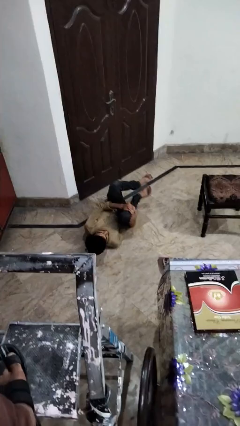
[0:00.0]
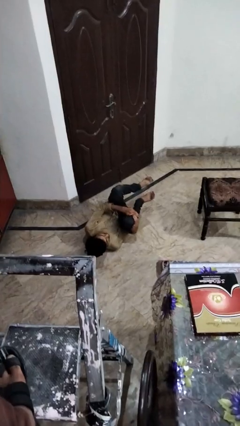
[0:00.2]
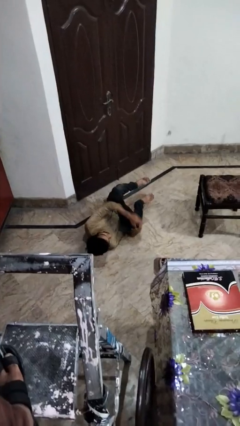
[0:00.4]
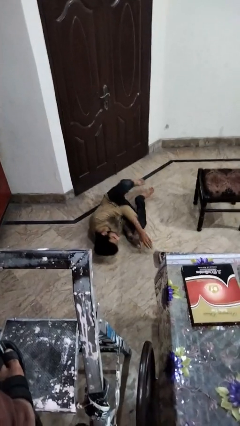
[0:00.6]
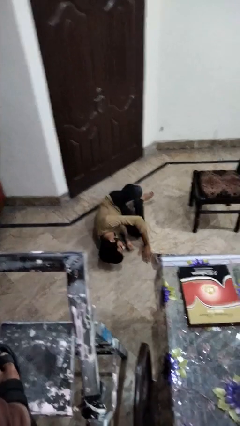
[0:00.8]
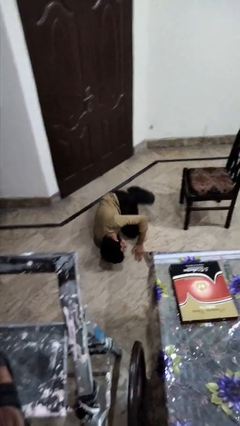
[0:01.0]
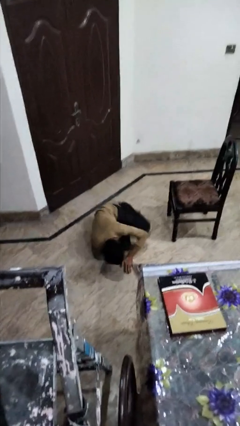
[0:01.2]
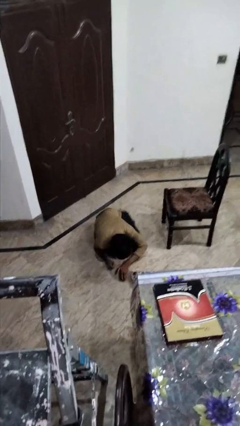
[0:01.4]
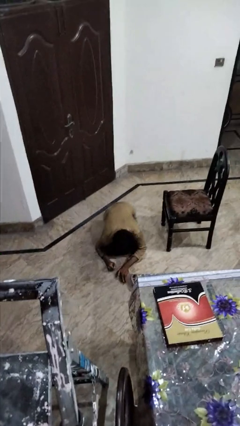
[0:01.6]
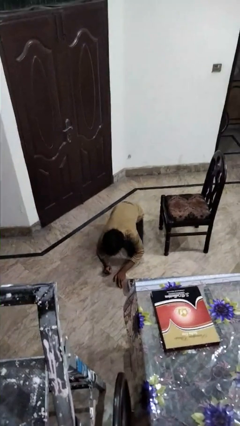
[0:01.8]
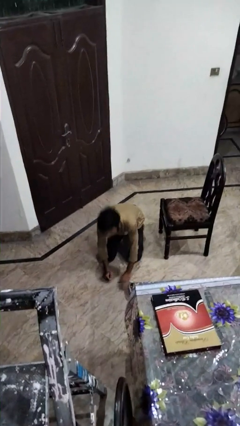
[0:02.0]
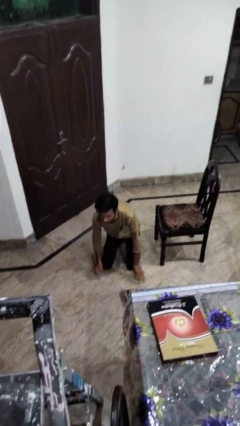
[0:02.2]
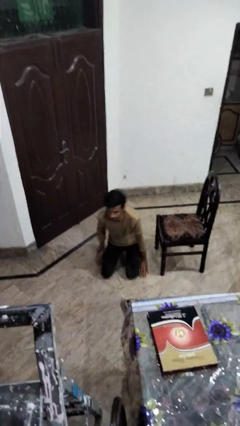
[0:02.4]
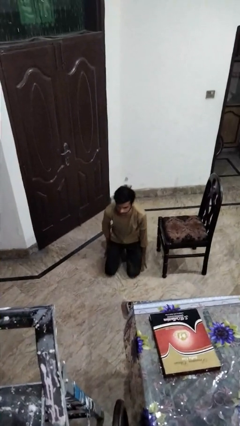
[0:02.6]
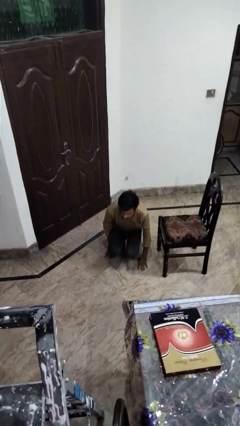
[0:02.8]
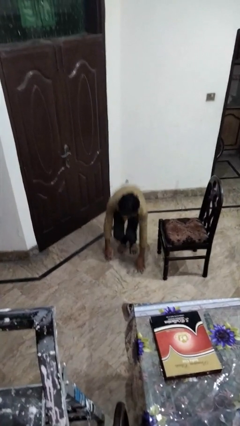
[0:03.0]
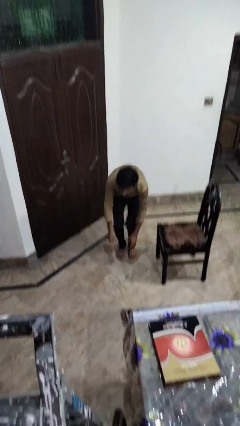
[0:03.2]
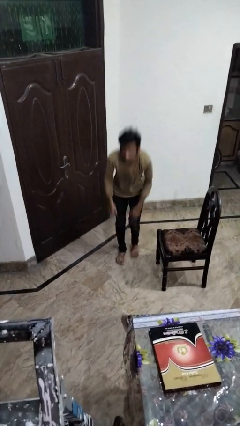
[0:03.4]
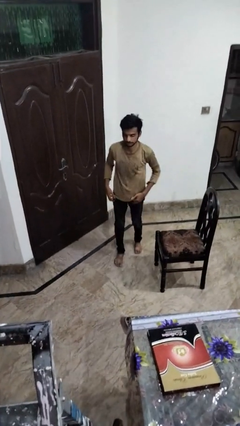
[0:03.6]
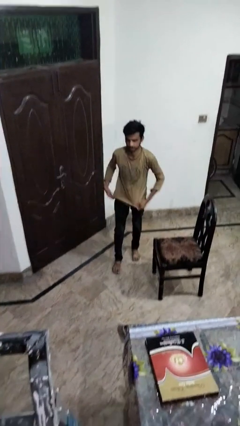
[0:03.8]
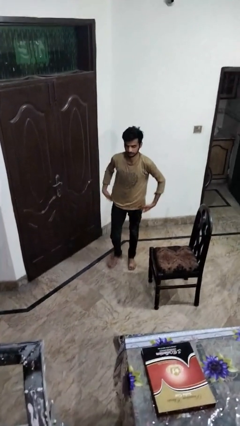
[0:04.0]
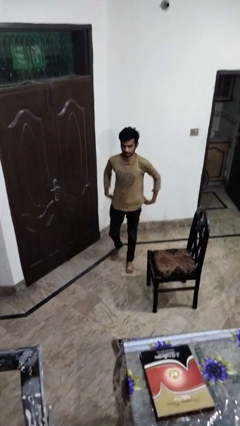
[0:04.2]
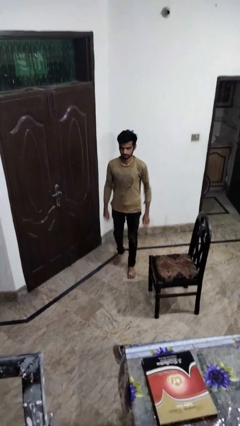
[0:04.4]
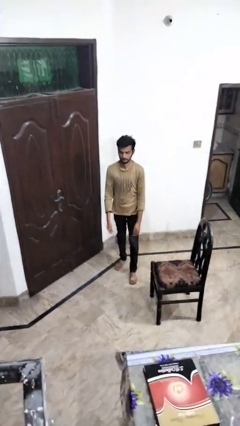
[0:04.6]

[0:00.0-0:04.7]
person stands up from floor

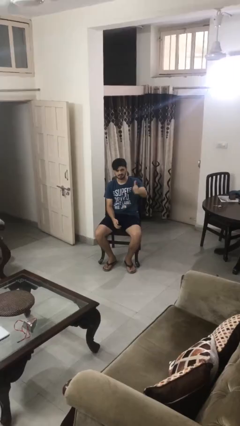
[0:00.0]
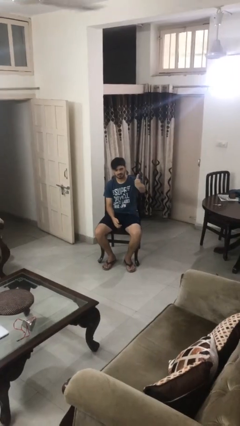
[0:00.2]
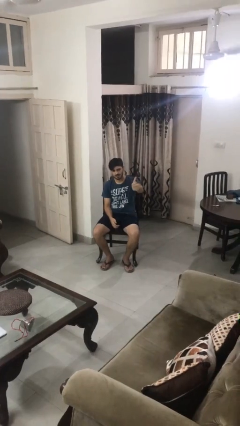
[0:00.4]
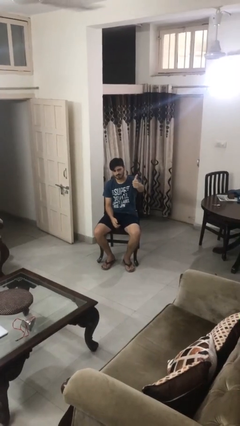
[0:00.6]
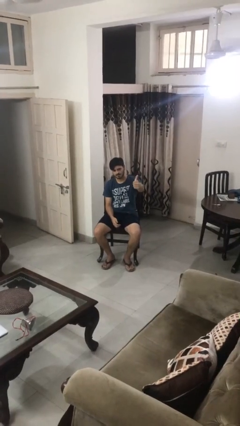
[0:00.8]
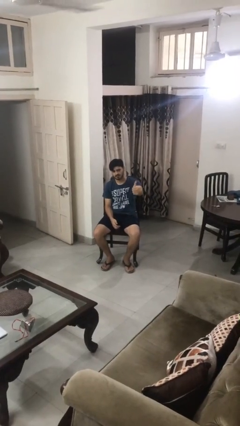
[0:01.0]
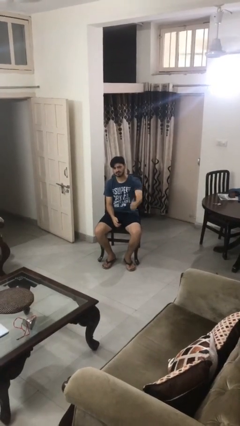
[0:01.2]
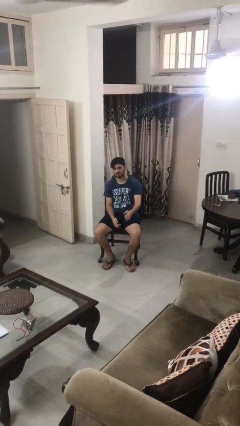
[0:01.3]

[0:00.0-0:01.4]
person gestures thumbs up

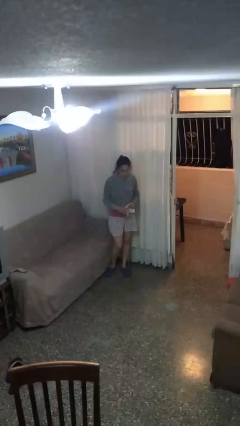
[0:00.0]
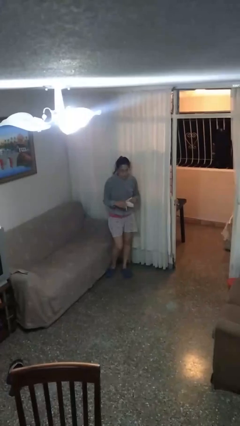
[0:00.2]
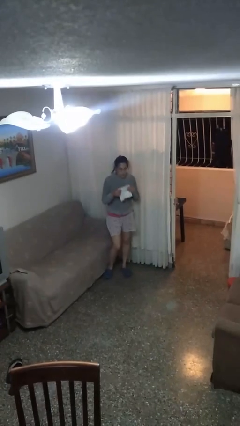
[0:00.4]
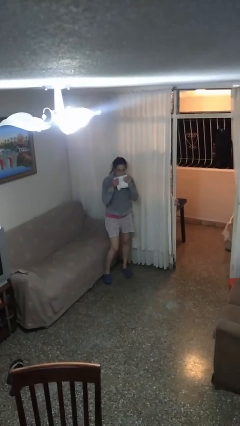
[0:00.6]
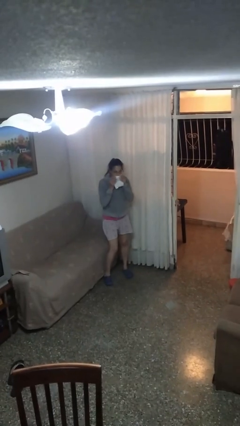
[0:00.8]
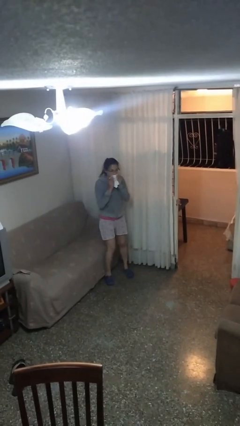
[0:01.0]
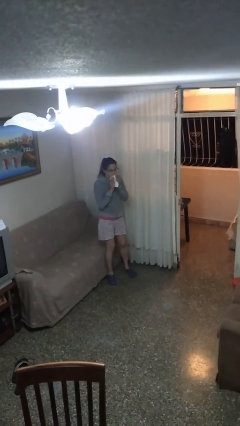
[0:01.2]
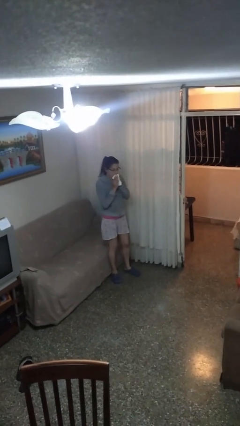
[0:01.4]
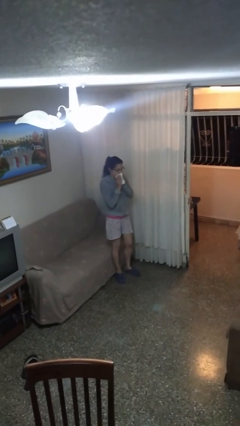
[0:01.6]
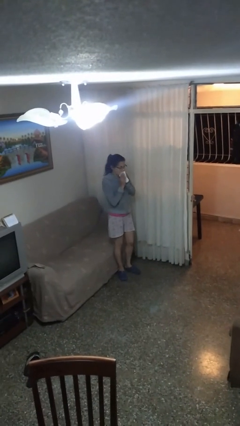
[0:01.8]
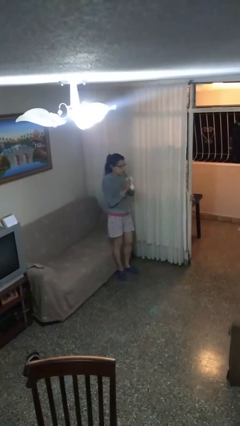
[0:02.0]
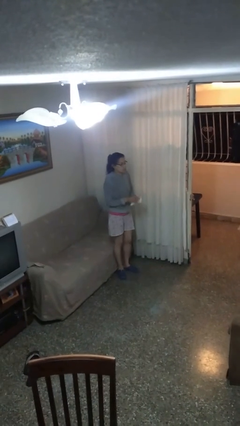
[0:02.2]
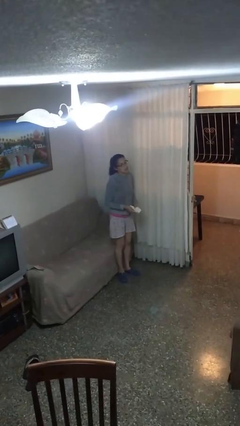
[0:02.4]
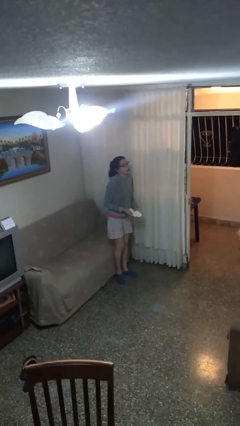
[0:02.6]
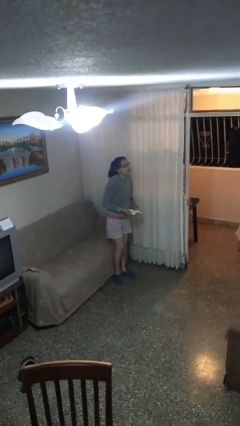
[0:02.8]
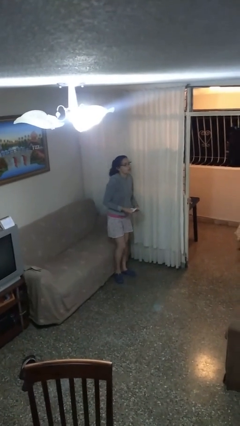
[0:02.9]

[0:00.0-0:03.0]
person wipes mouth with napkin

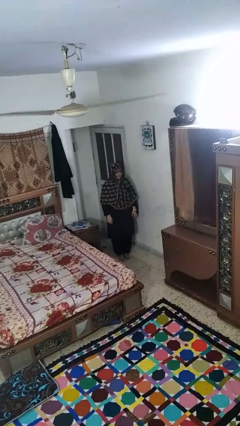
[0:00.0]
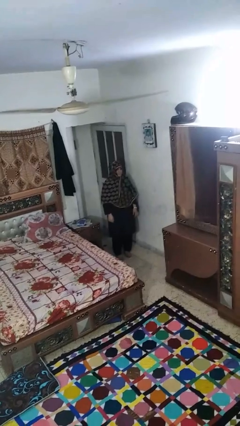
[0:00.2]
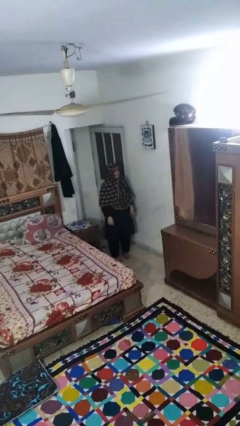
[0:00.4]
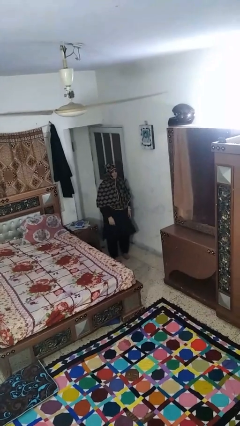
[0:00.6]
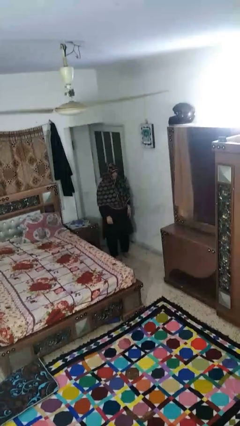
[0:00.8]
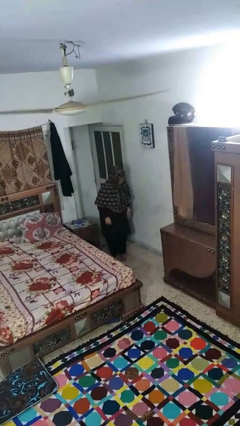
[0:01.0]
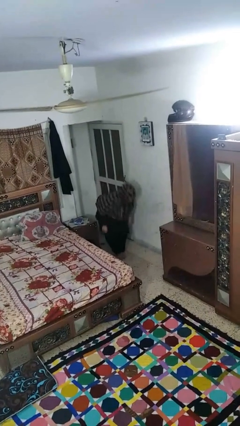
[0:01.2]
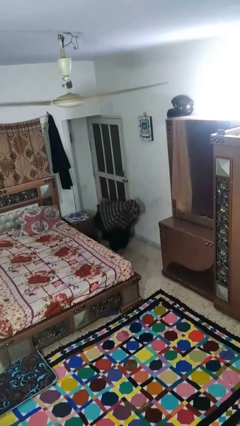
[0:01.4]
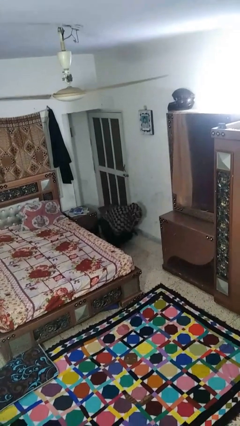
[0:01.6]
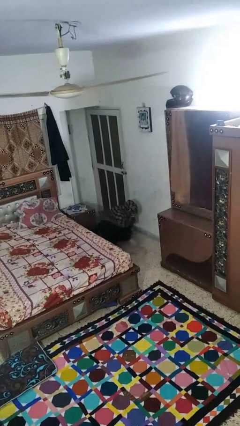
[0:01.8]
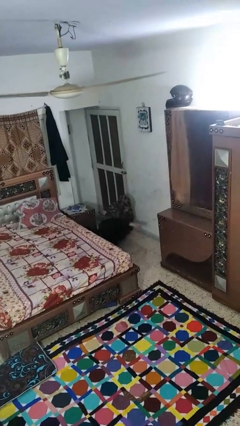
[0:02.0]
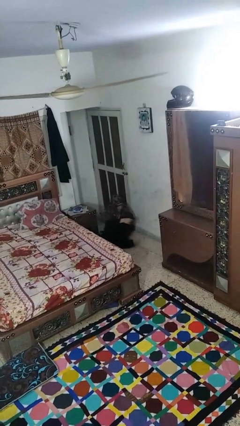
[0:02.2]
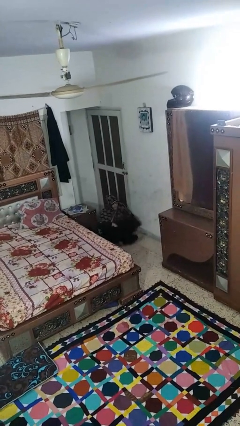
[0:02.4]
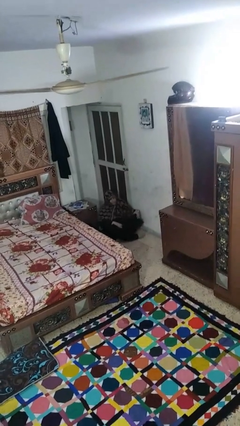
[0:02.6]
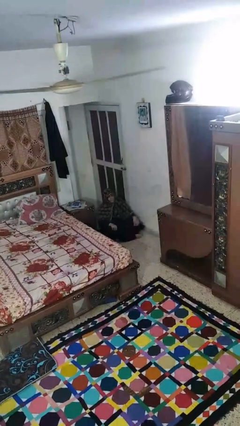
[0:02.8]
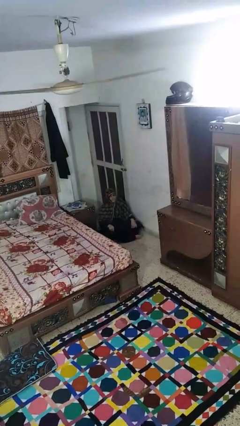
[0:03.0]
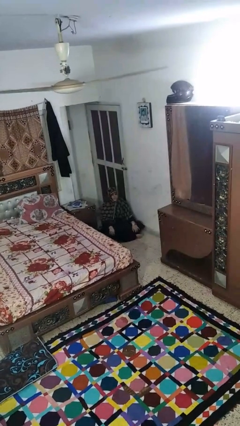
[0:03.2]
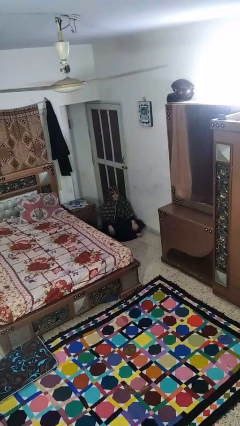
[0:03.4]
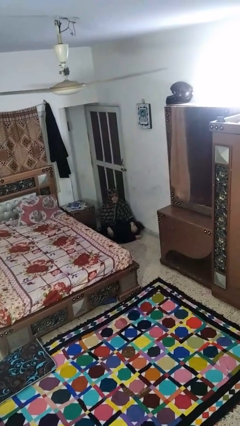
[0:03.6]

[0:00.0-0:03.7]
person sits crisscross

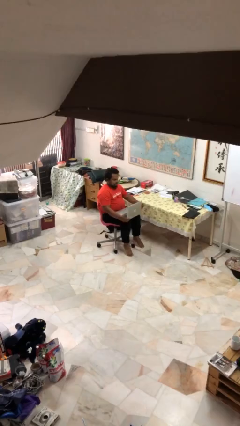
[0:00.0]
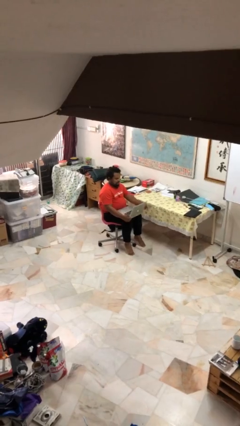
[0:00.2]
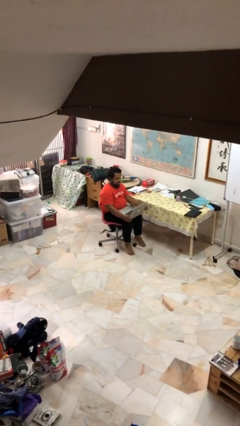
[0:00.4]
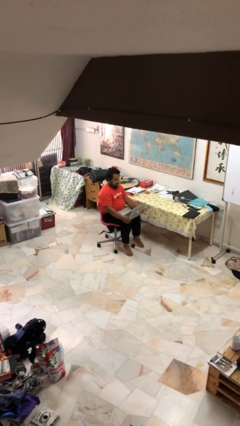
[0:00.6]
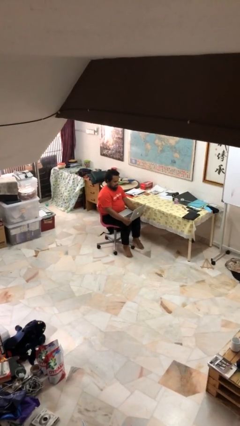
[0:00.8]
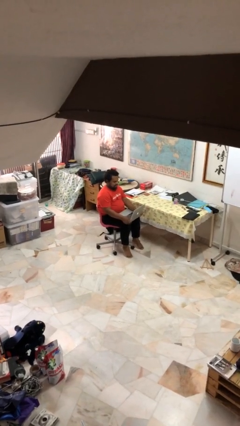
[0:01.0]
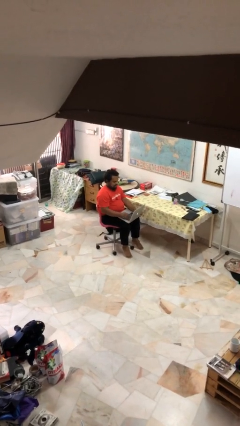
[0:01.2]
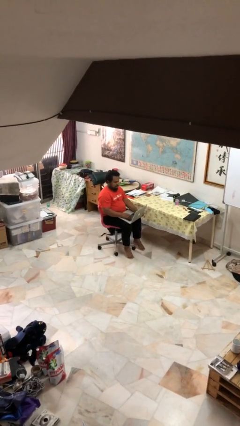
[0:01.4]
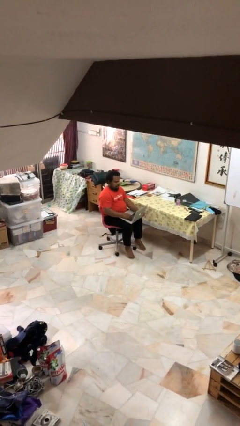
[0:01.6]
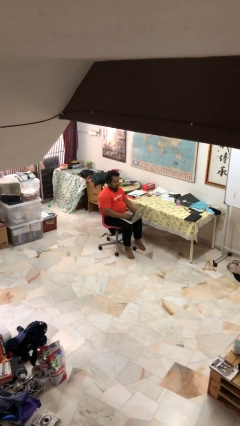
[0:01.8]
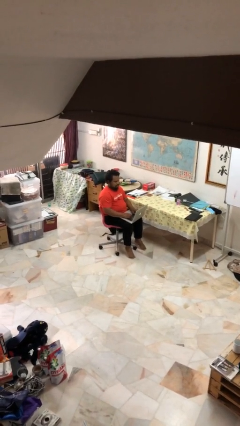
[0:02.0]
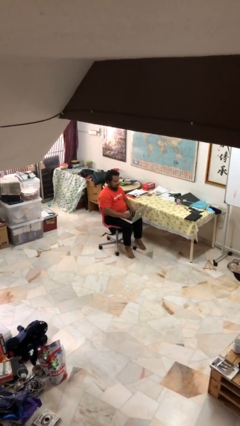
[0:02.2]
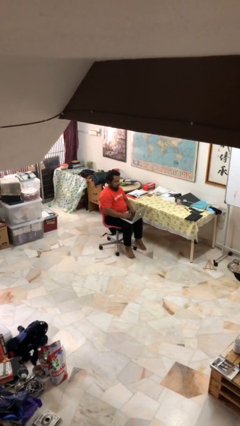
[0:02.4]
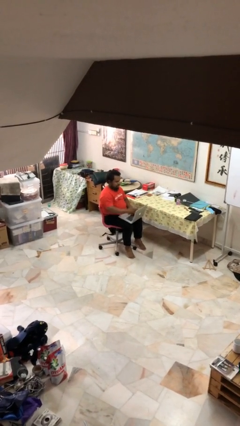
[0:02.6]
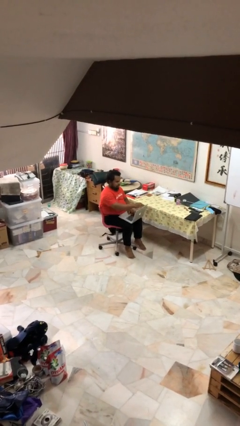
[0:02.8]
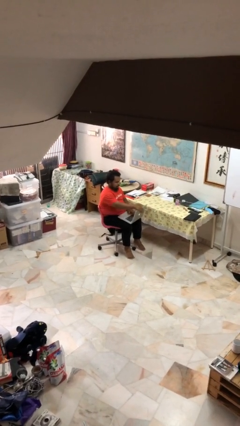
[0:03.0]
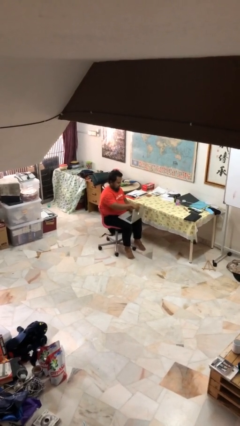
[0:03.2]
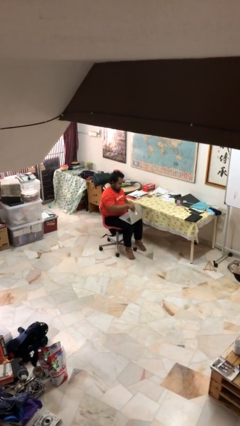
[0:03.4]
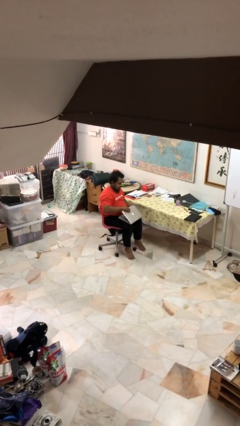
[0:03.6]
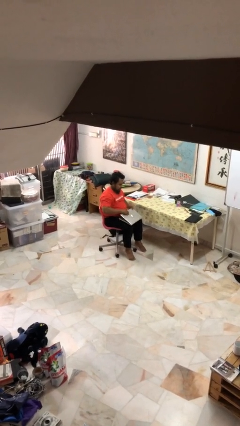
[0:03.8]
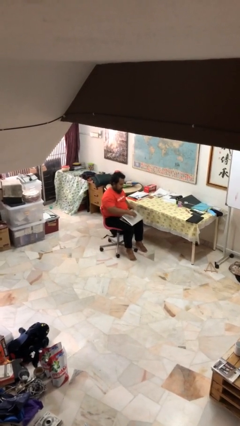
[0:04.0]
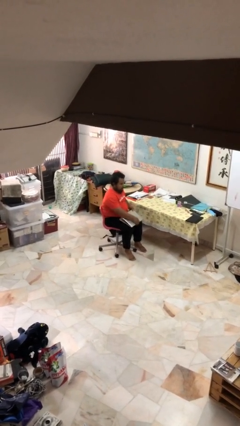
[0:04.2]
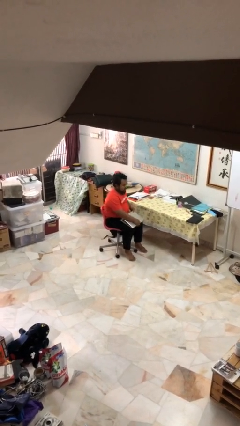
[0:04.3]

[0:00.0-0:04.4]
person interacts with laptop

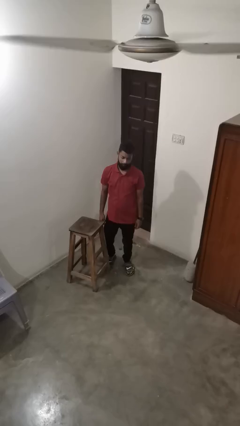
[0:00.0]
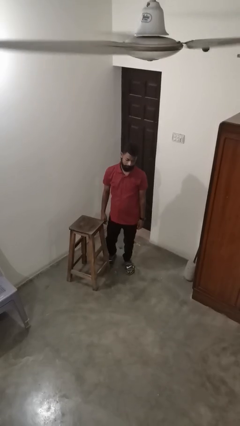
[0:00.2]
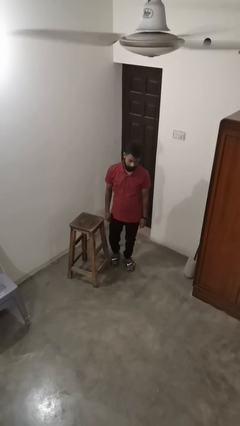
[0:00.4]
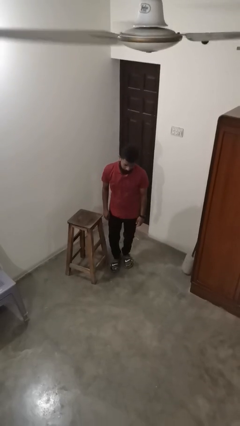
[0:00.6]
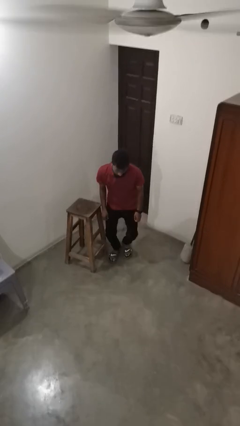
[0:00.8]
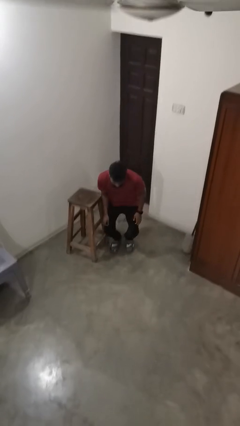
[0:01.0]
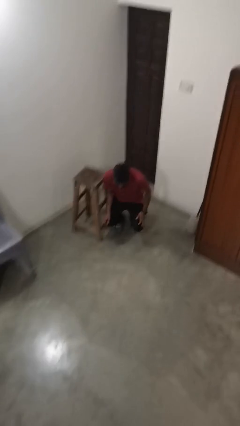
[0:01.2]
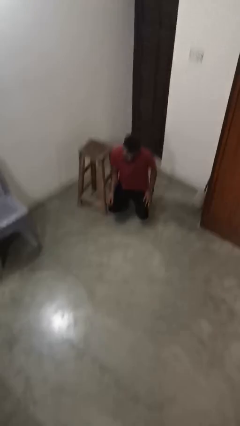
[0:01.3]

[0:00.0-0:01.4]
person trips on object on floor
